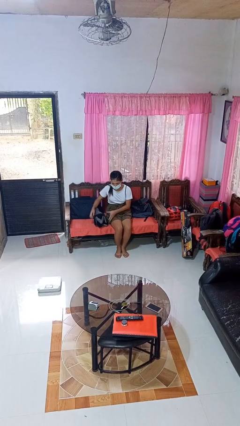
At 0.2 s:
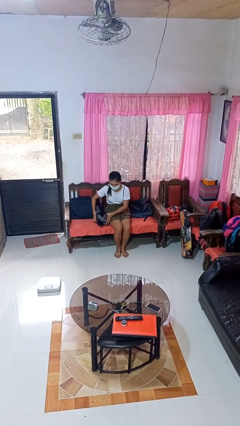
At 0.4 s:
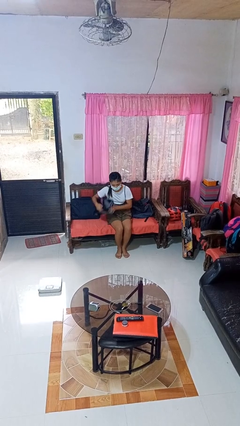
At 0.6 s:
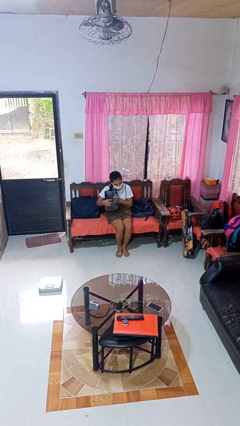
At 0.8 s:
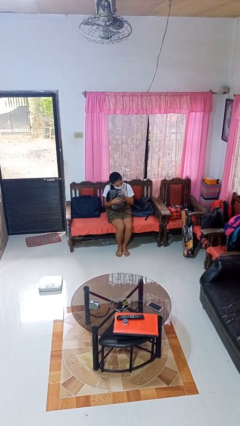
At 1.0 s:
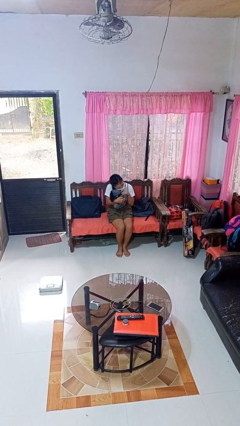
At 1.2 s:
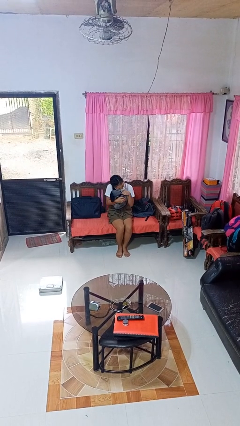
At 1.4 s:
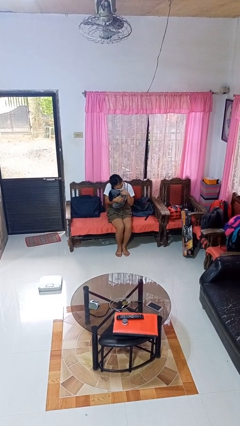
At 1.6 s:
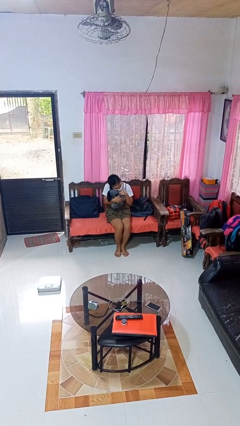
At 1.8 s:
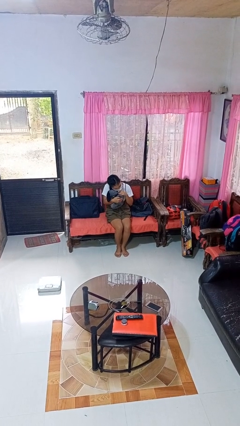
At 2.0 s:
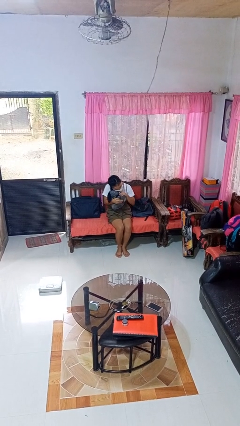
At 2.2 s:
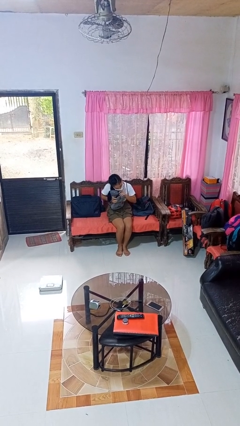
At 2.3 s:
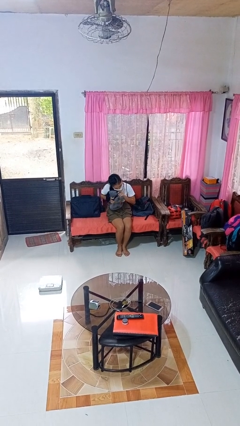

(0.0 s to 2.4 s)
person hugs stuffed animal

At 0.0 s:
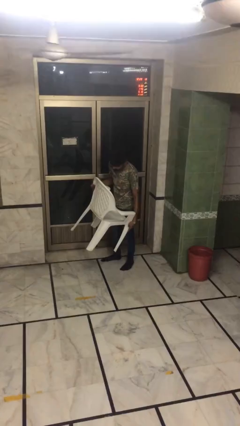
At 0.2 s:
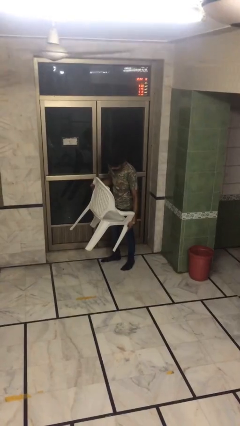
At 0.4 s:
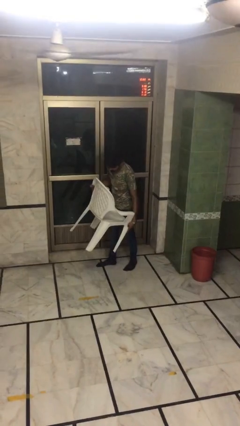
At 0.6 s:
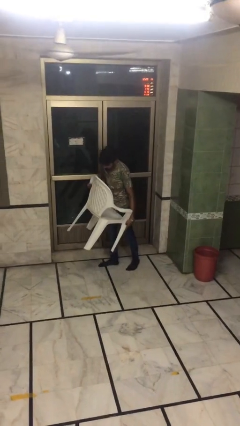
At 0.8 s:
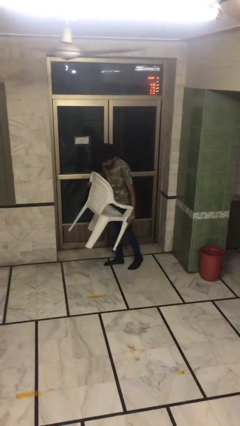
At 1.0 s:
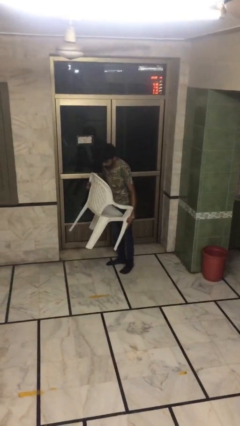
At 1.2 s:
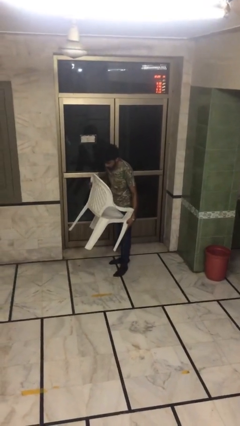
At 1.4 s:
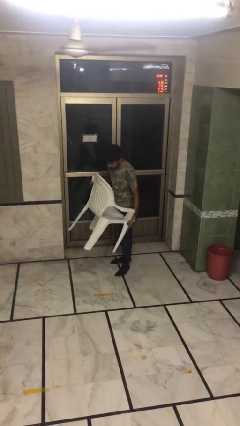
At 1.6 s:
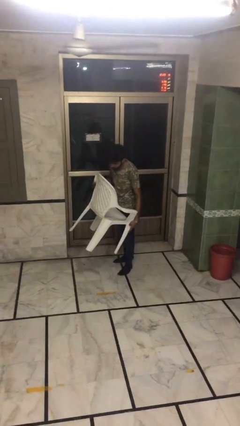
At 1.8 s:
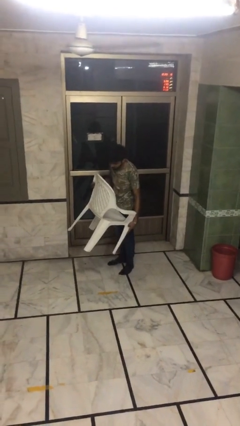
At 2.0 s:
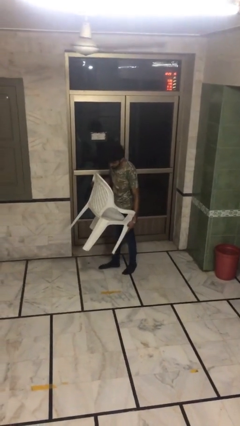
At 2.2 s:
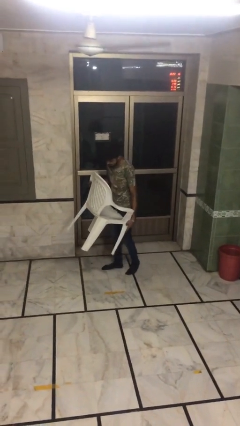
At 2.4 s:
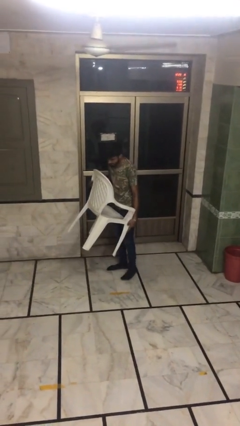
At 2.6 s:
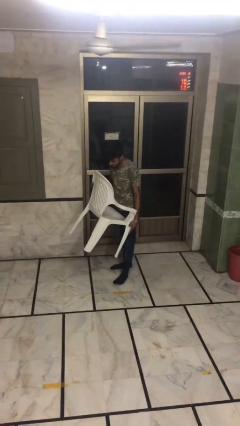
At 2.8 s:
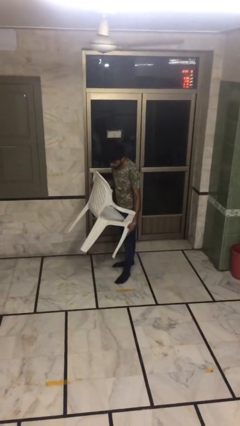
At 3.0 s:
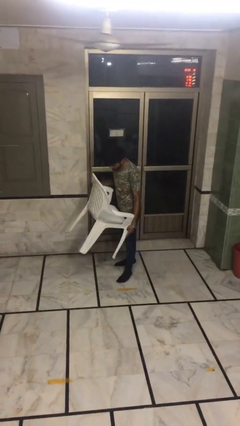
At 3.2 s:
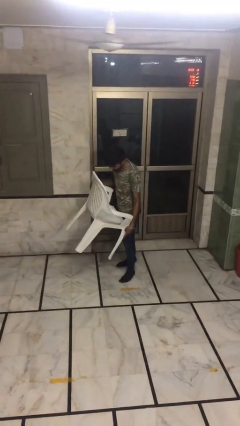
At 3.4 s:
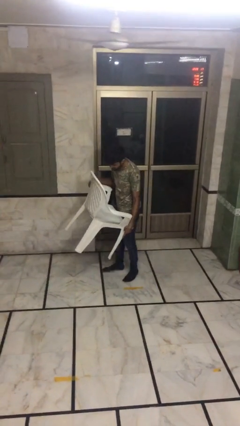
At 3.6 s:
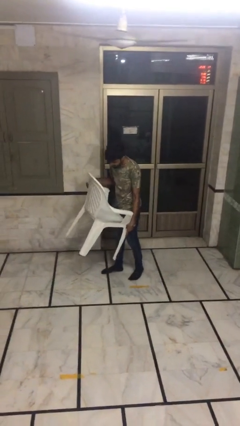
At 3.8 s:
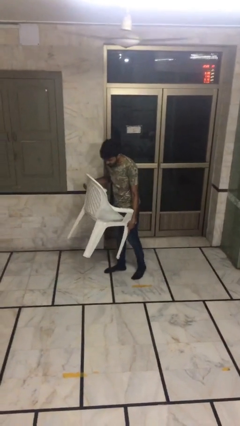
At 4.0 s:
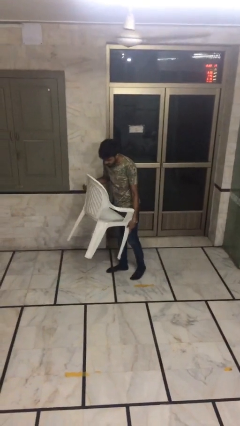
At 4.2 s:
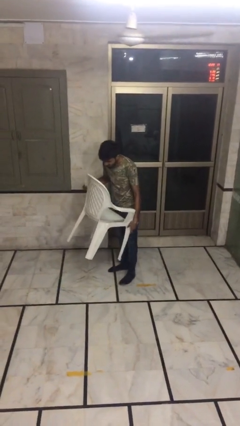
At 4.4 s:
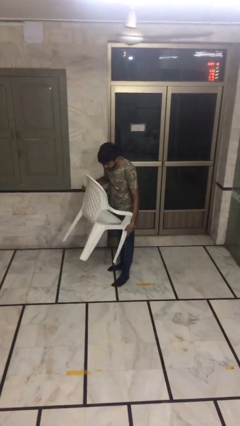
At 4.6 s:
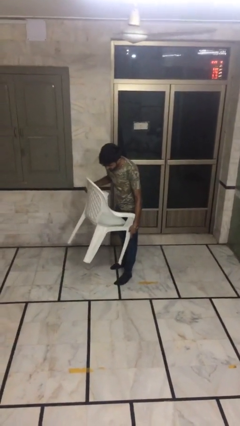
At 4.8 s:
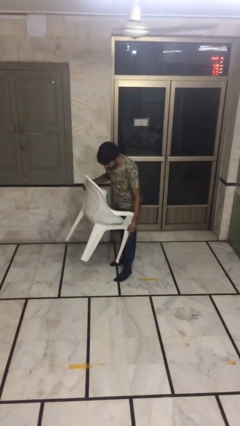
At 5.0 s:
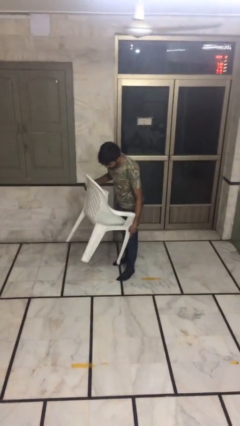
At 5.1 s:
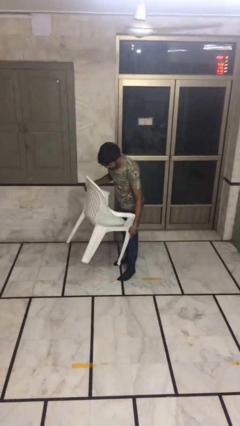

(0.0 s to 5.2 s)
person carries heavy object

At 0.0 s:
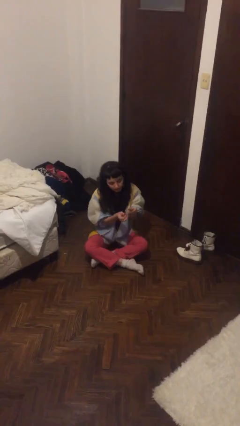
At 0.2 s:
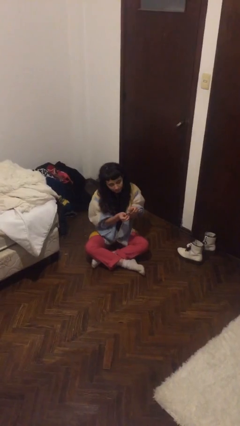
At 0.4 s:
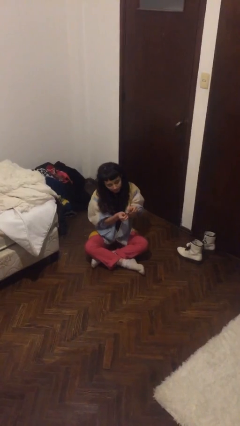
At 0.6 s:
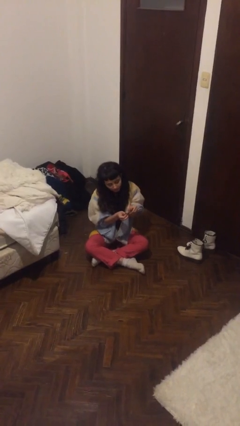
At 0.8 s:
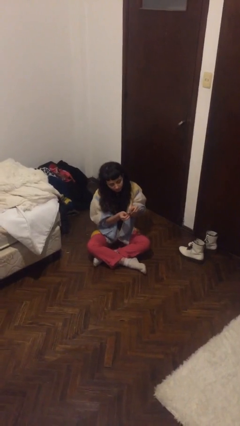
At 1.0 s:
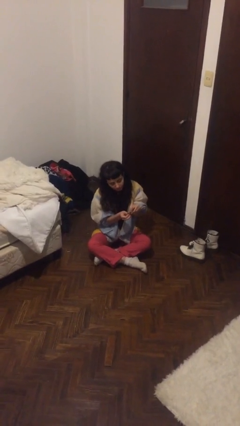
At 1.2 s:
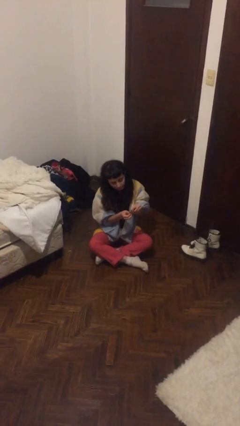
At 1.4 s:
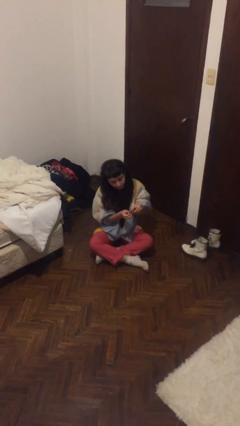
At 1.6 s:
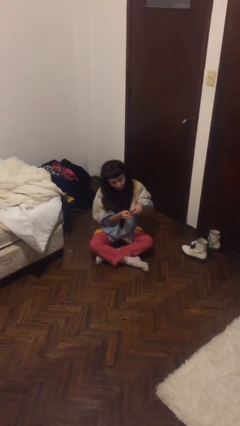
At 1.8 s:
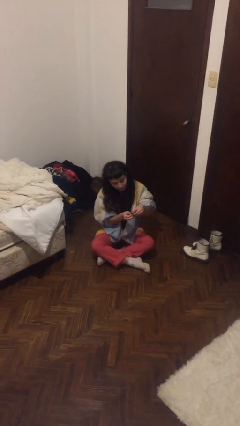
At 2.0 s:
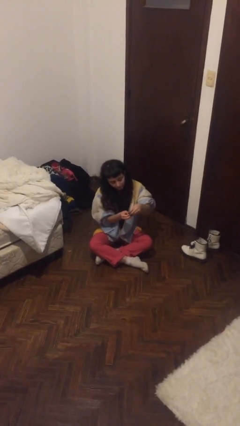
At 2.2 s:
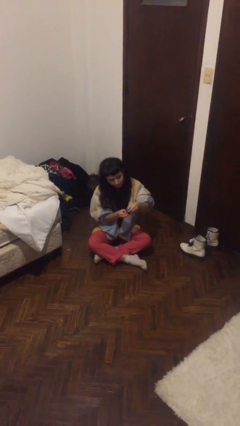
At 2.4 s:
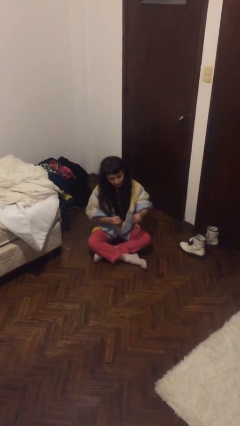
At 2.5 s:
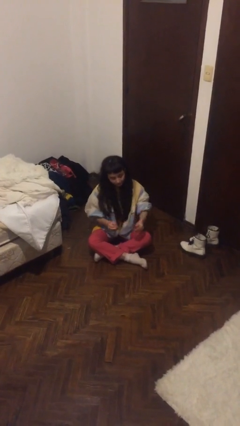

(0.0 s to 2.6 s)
person clips fingernails

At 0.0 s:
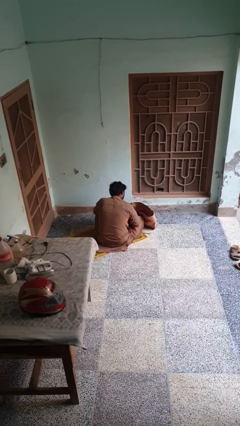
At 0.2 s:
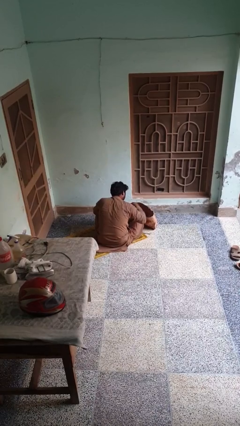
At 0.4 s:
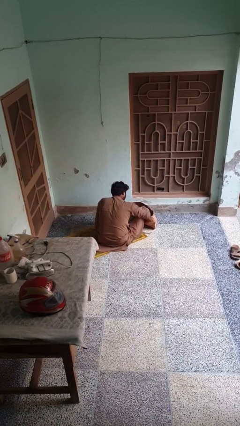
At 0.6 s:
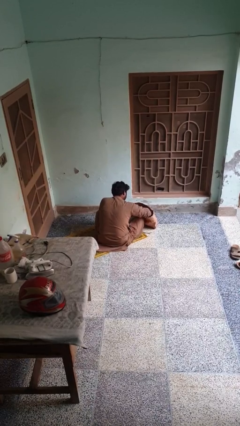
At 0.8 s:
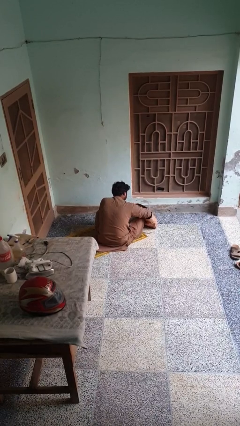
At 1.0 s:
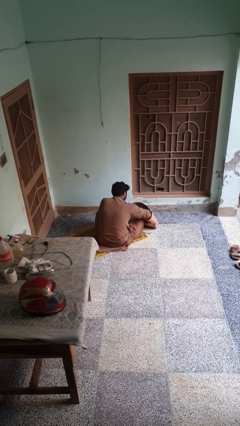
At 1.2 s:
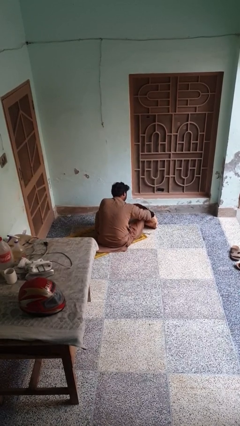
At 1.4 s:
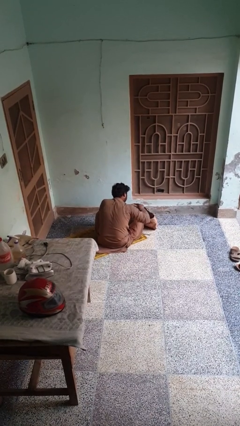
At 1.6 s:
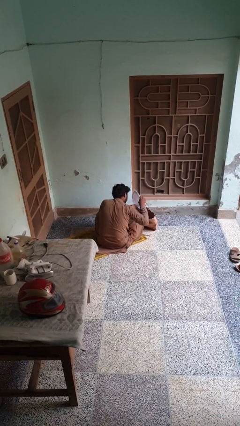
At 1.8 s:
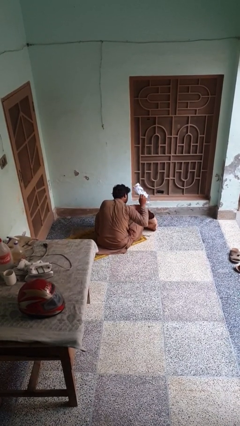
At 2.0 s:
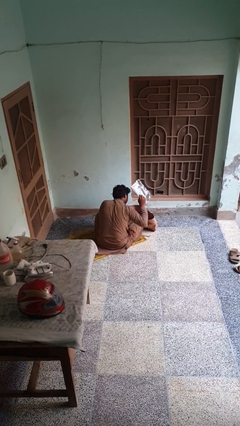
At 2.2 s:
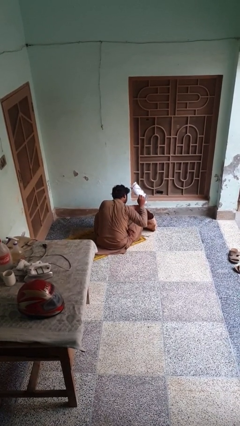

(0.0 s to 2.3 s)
person searches in bag

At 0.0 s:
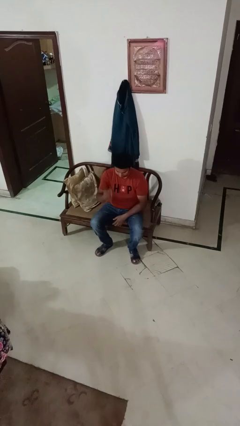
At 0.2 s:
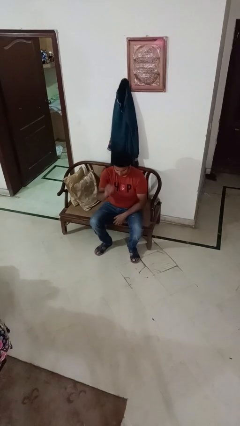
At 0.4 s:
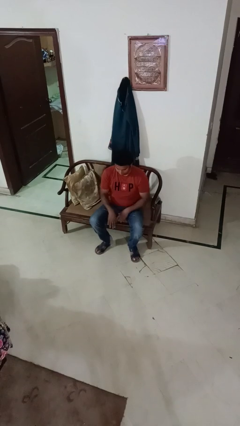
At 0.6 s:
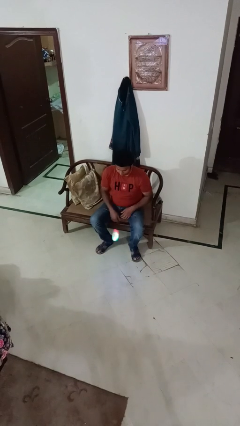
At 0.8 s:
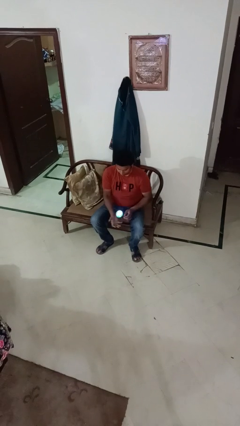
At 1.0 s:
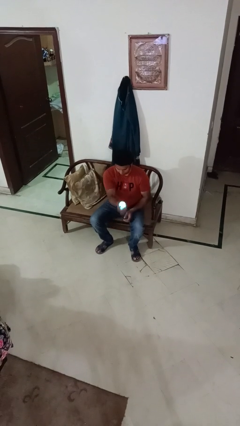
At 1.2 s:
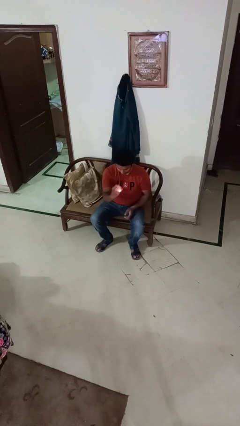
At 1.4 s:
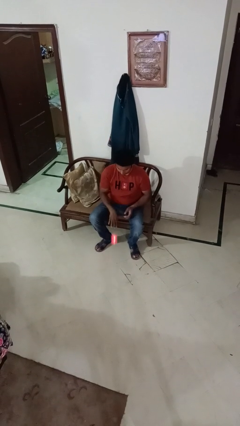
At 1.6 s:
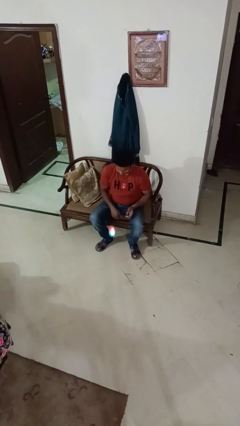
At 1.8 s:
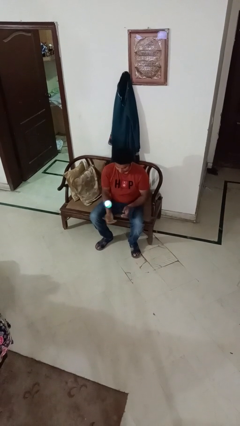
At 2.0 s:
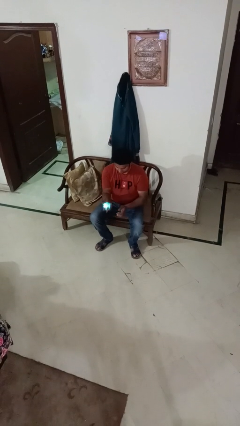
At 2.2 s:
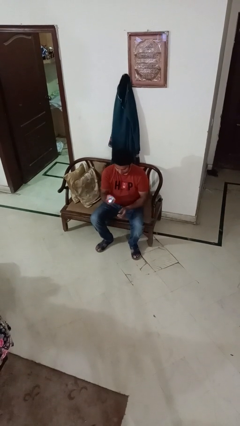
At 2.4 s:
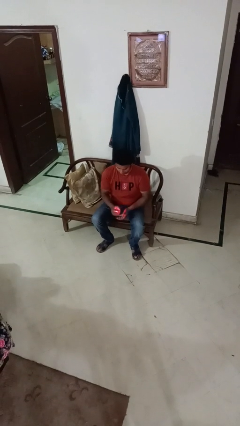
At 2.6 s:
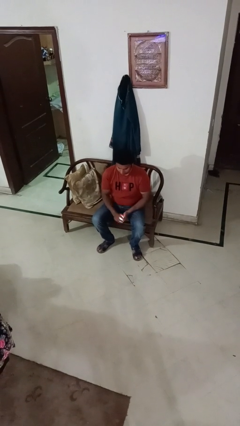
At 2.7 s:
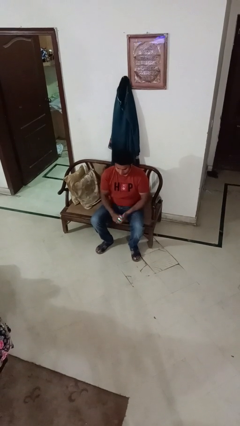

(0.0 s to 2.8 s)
person bounces ball on floor

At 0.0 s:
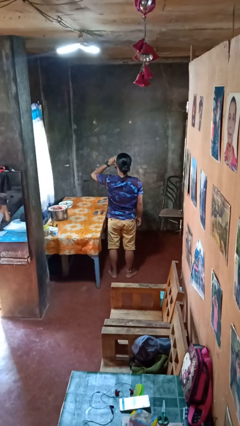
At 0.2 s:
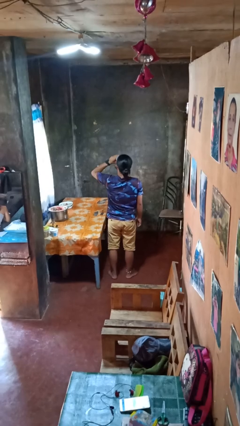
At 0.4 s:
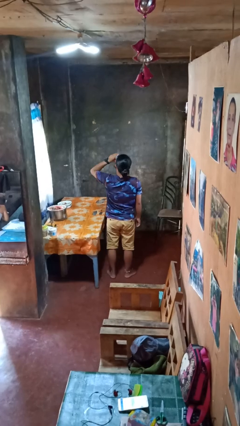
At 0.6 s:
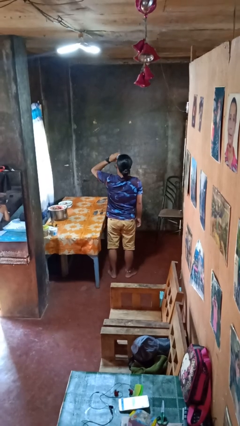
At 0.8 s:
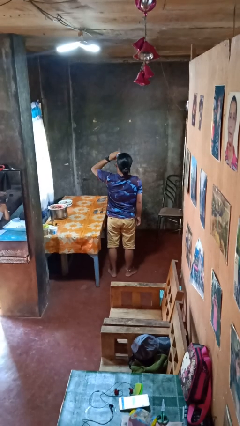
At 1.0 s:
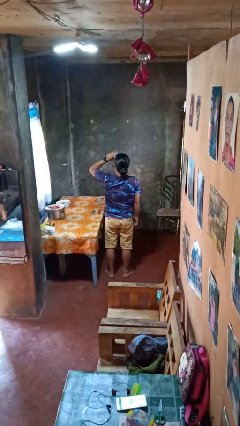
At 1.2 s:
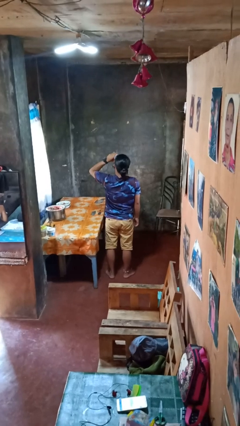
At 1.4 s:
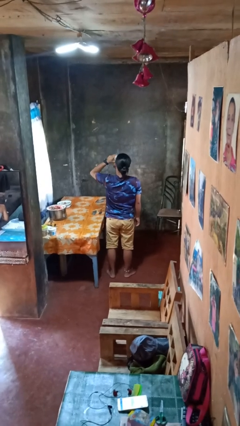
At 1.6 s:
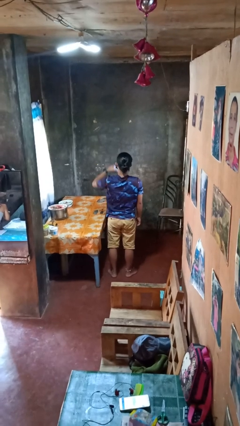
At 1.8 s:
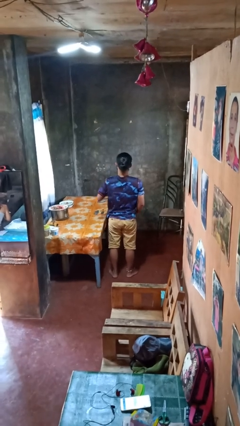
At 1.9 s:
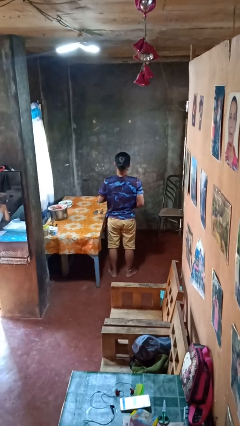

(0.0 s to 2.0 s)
person drinks from beverage can

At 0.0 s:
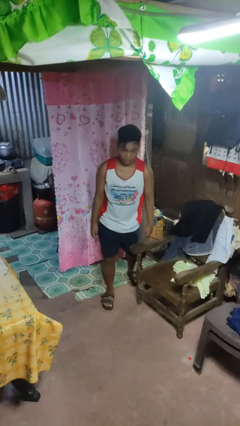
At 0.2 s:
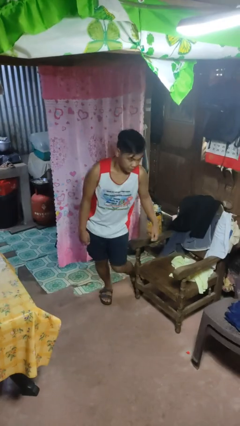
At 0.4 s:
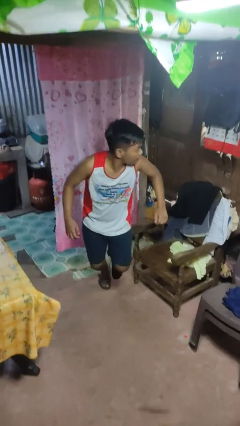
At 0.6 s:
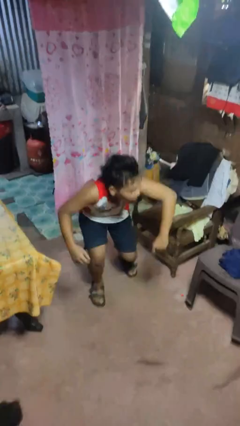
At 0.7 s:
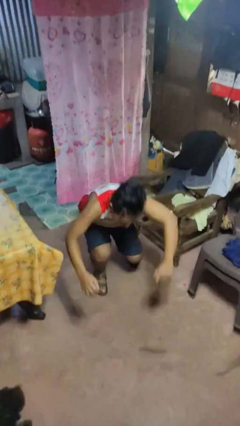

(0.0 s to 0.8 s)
person trips on object on floor
